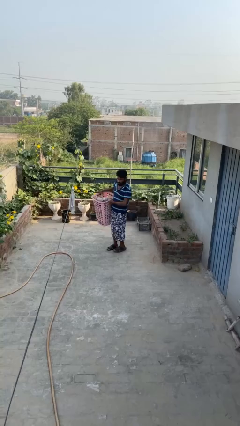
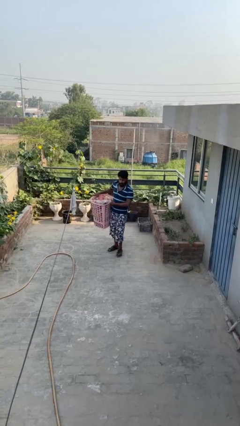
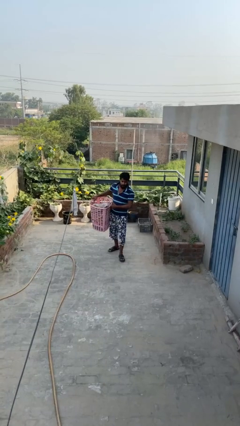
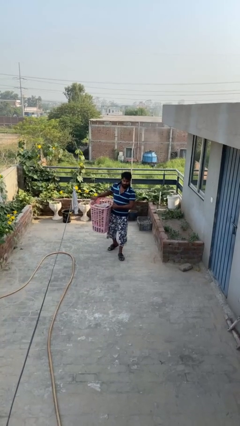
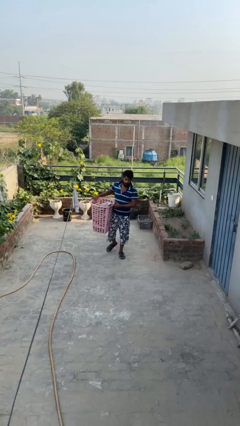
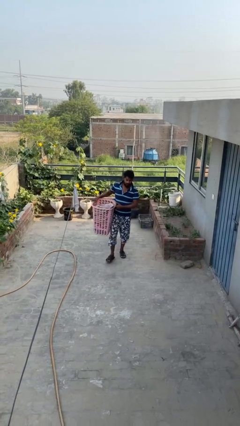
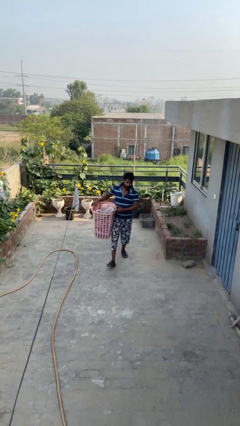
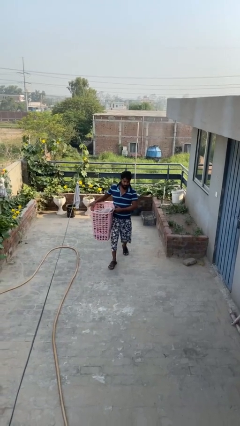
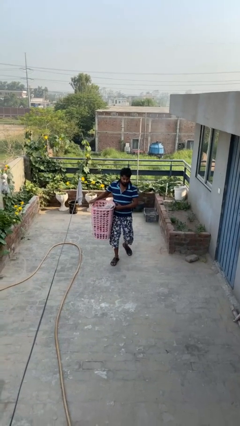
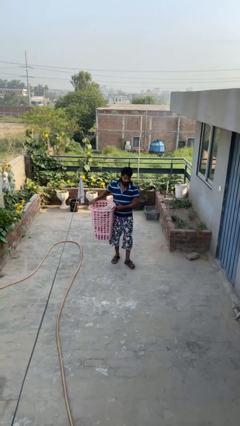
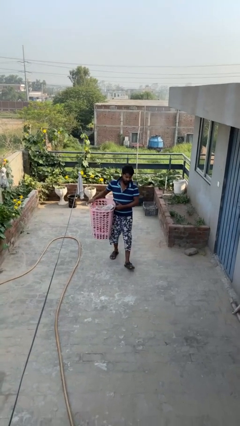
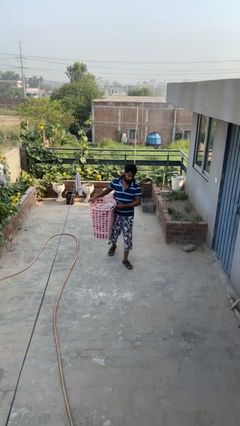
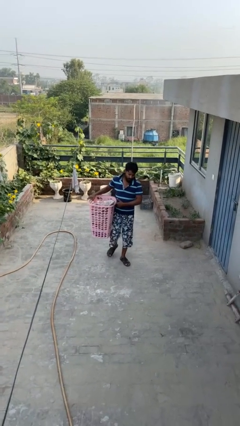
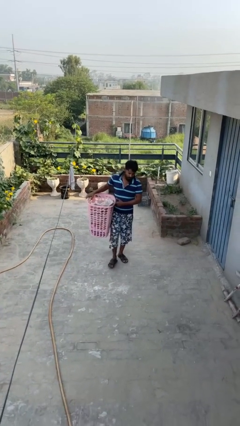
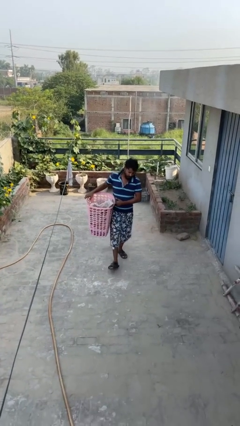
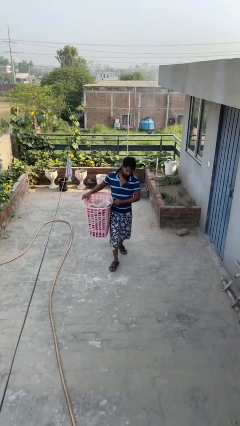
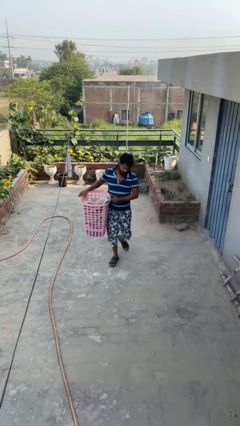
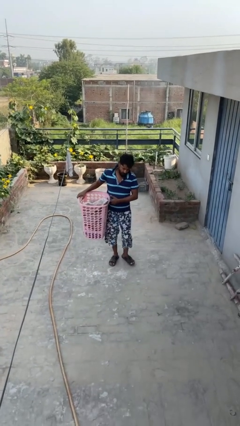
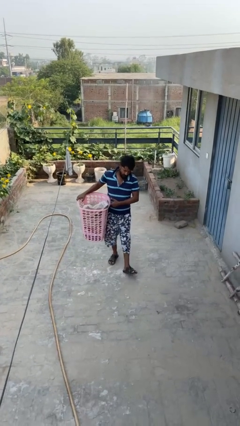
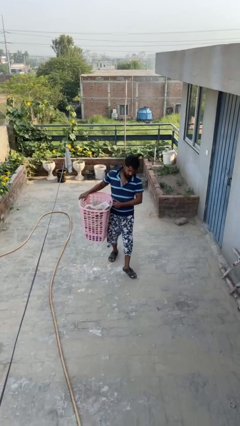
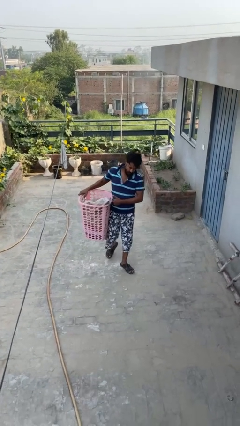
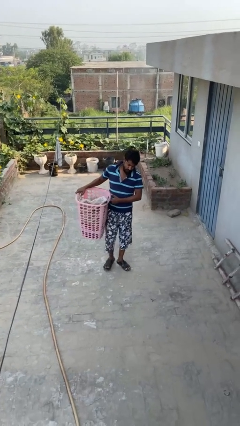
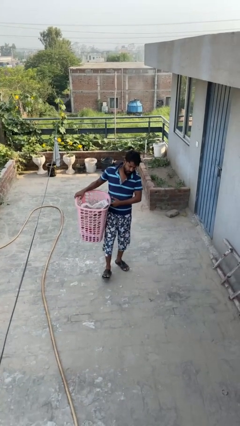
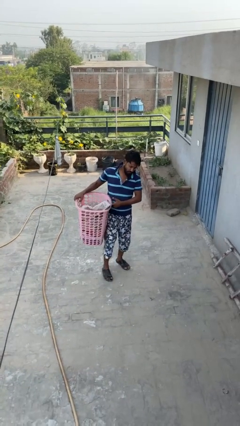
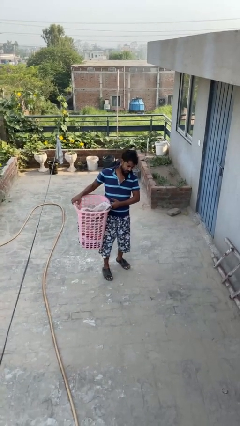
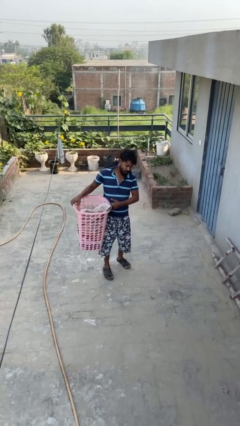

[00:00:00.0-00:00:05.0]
person carries laundry basket

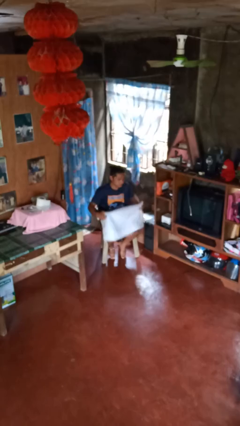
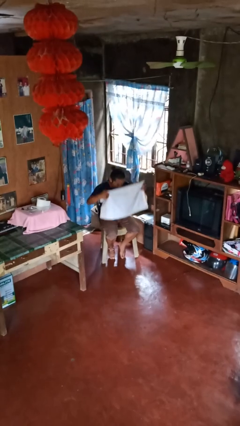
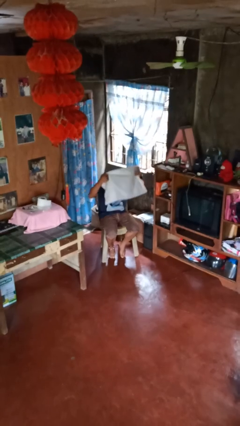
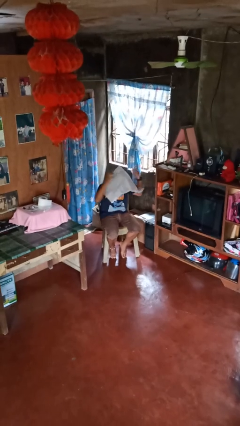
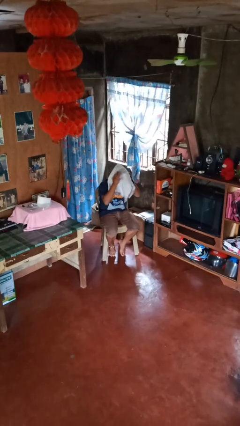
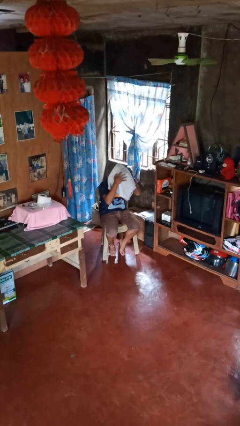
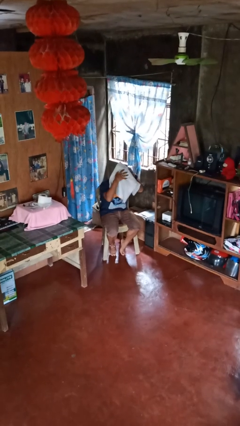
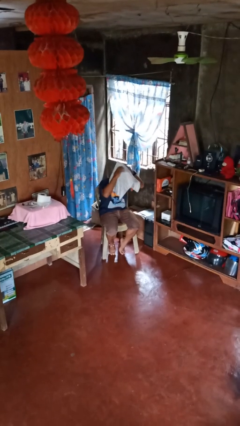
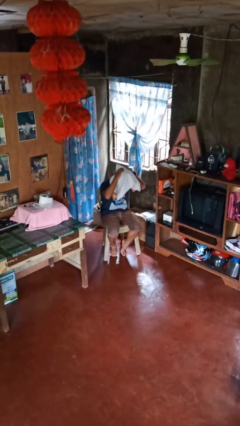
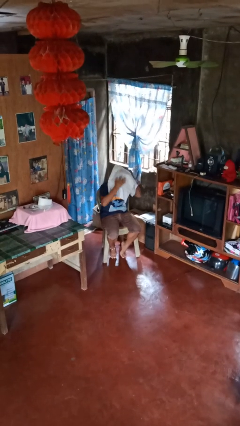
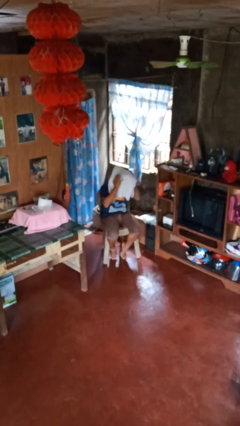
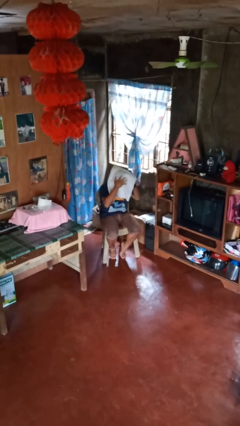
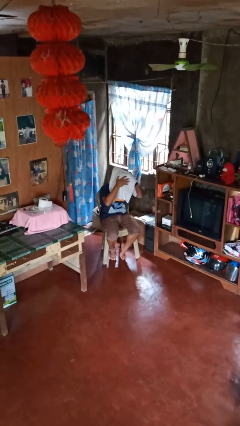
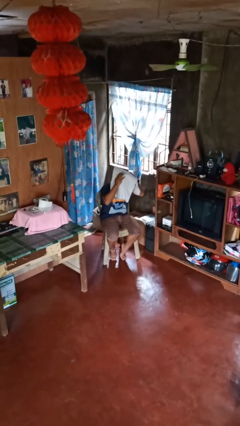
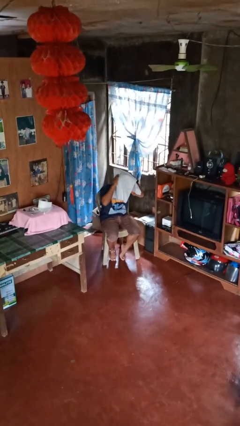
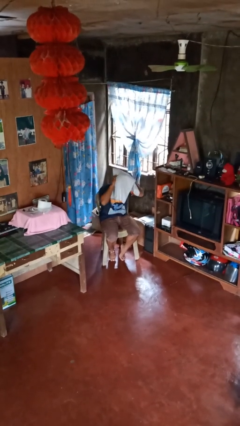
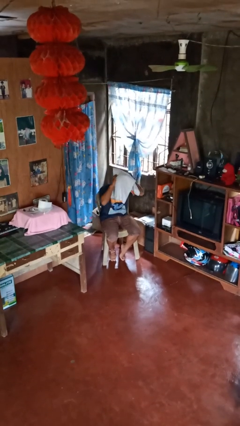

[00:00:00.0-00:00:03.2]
person dries hair with towel

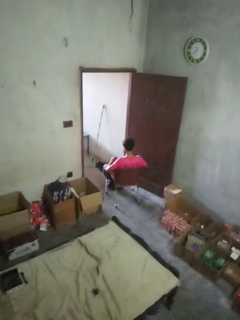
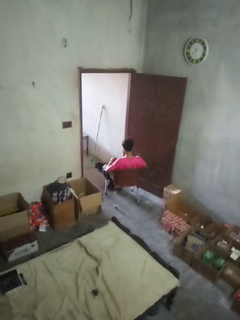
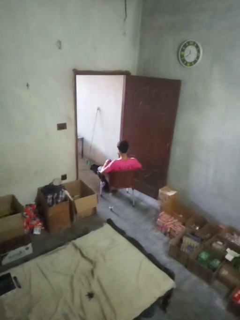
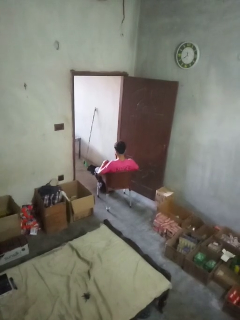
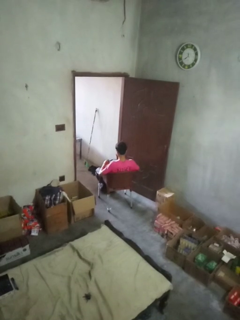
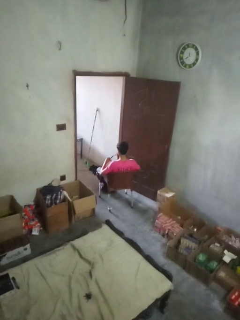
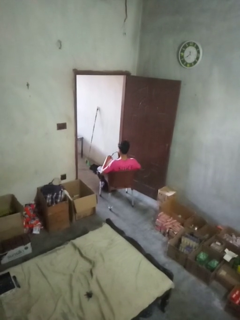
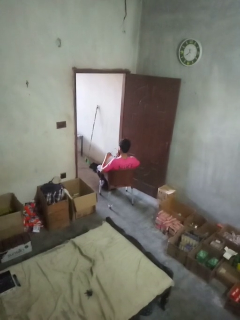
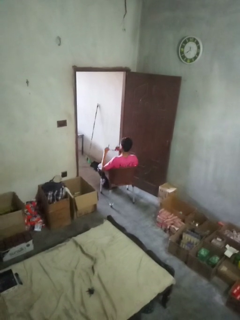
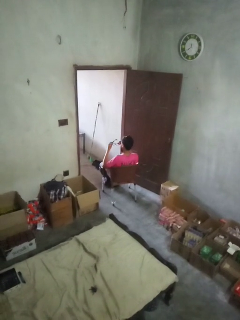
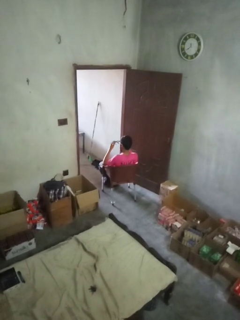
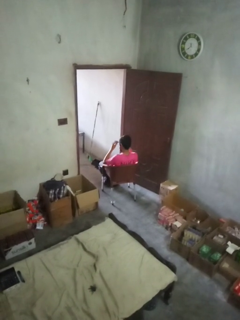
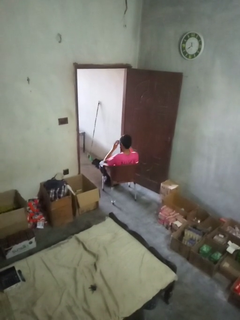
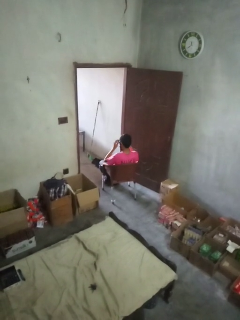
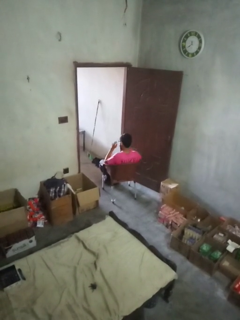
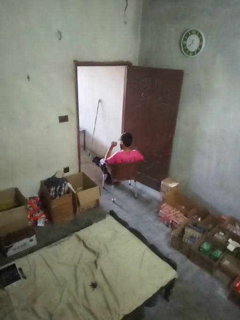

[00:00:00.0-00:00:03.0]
person puts on glasses

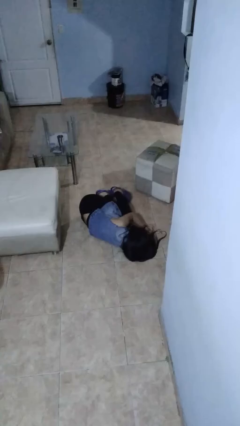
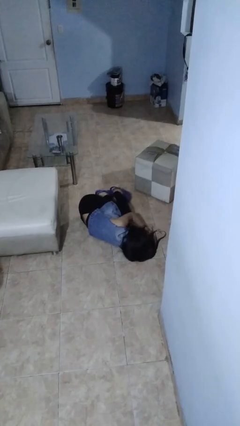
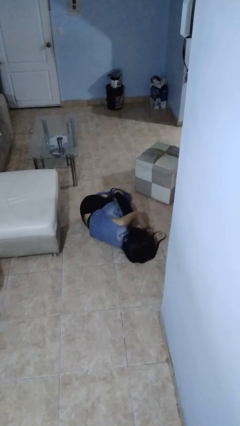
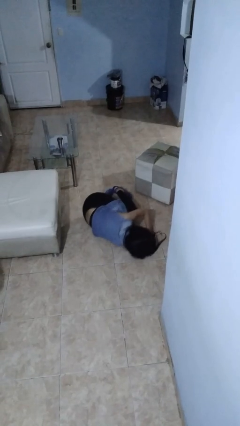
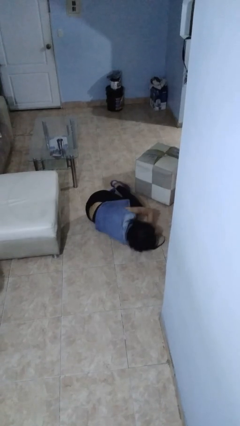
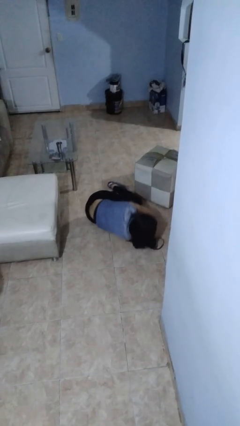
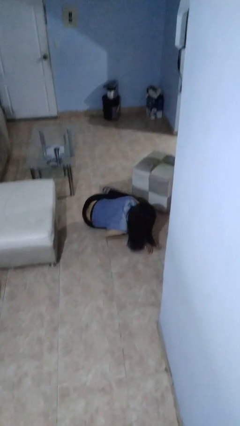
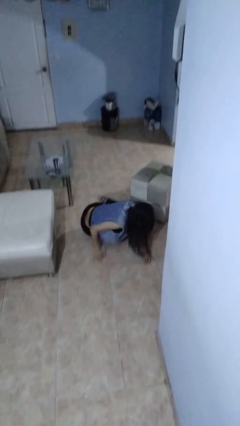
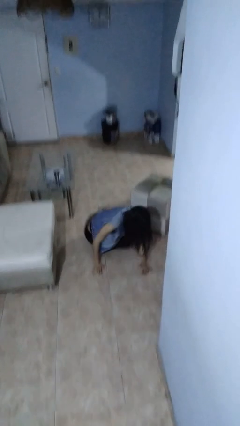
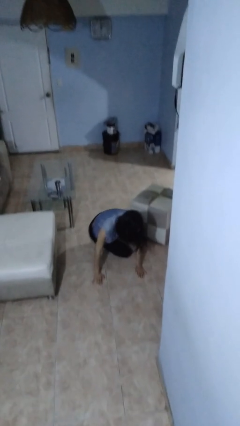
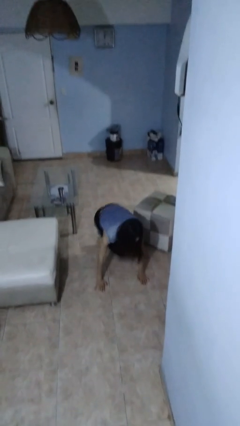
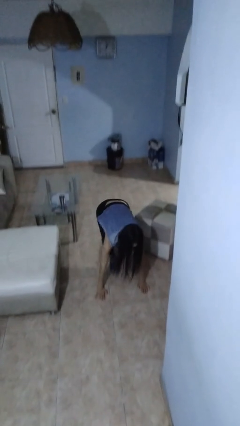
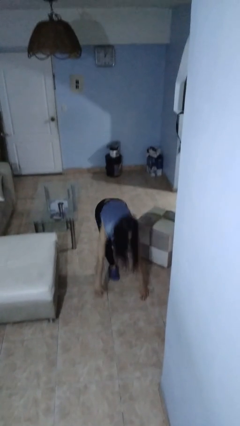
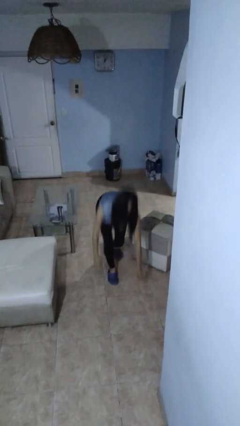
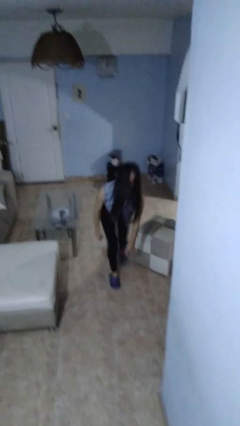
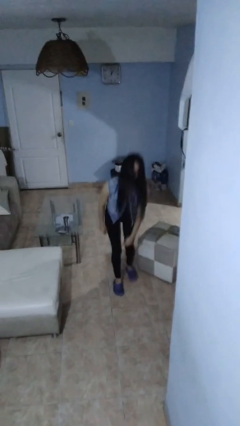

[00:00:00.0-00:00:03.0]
person stands up from floor

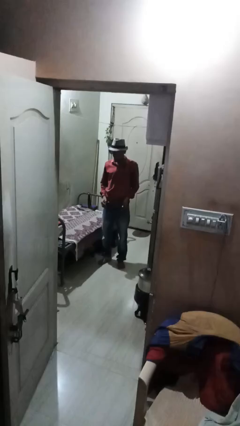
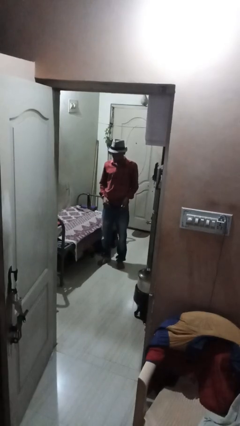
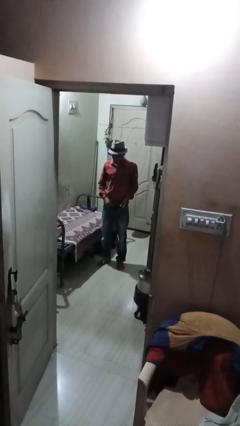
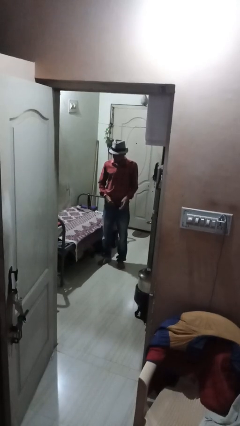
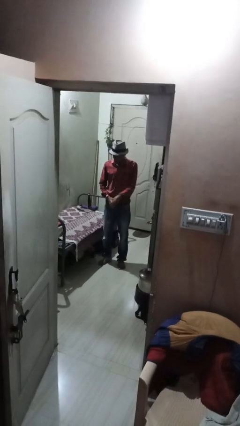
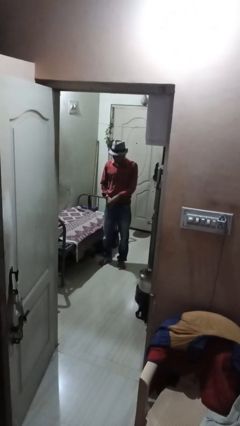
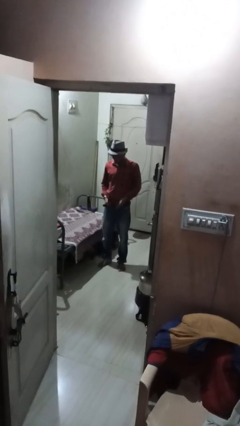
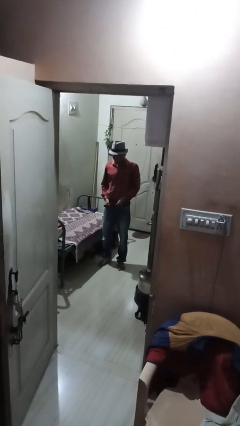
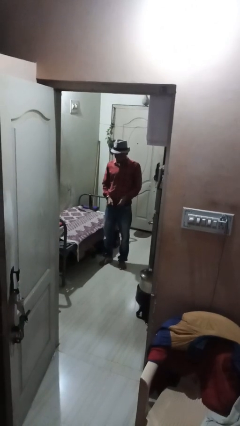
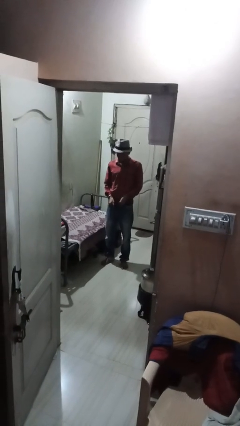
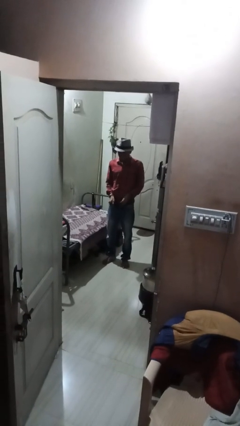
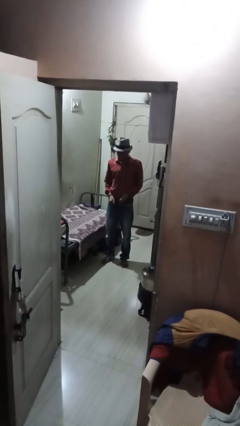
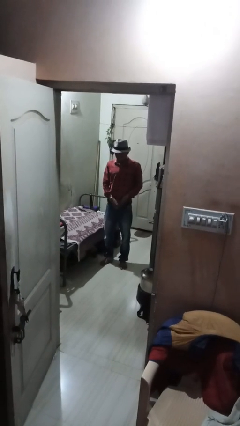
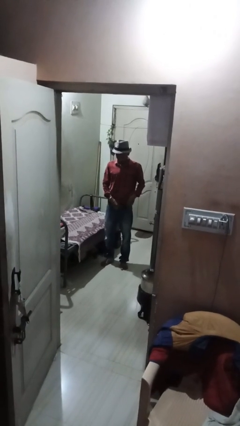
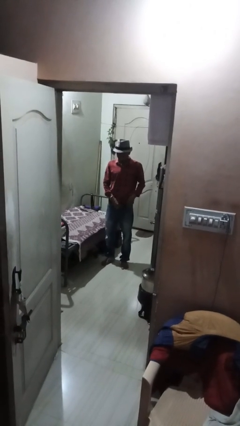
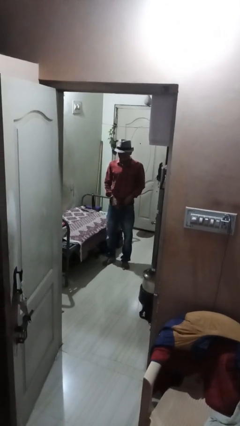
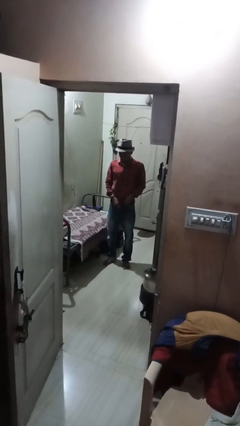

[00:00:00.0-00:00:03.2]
person puts on belt

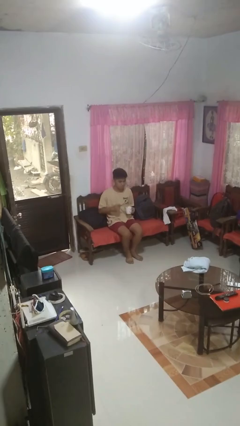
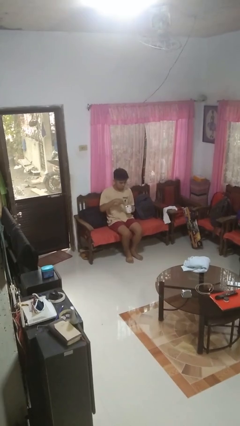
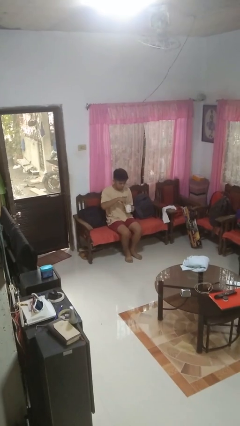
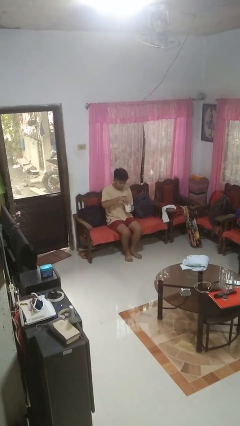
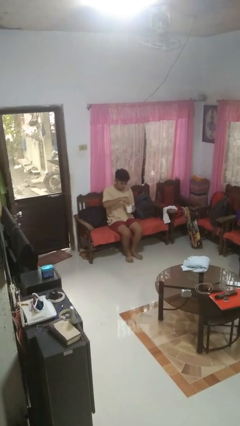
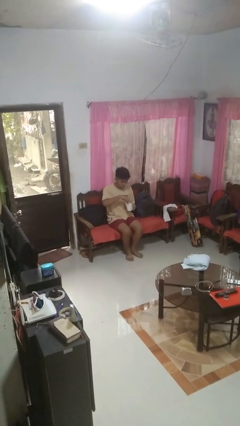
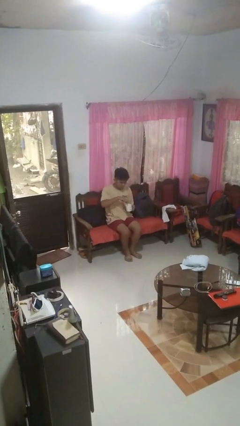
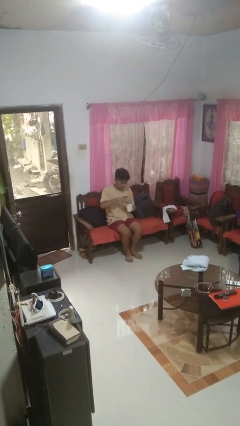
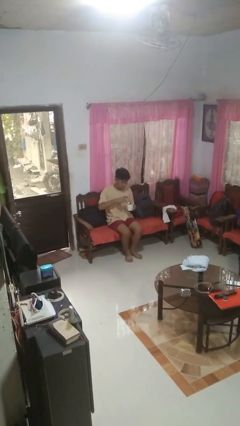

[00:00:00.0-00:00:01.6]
person stirs mug
